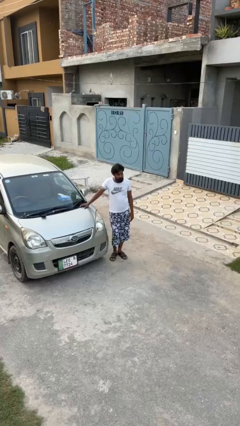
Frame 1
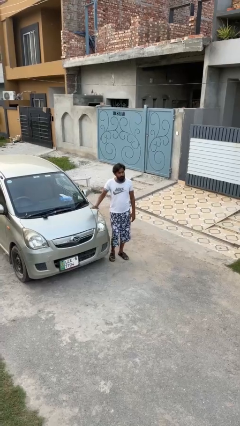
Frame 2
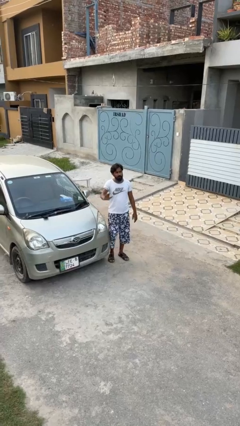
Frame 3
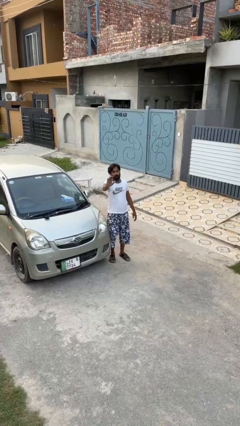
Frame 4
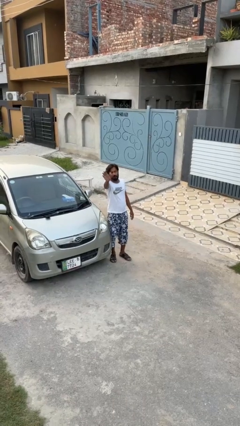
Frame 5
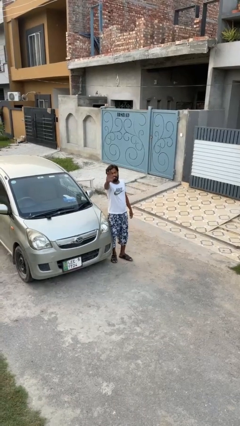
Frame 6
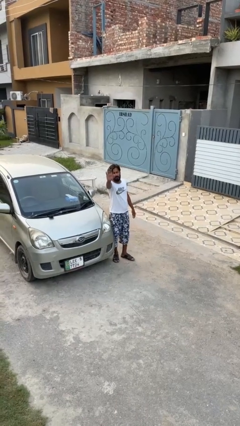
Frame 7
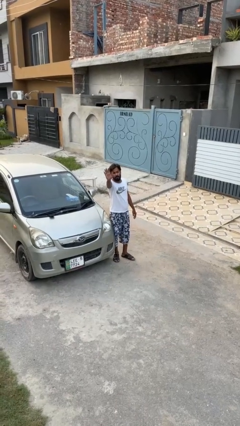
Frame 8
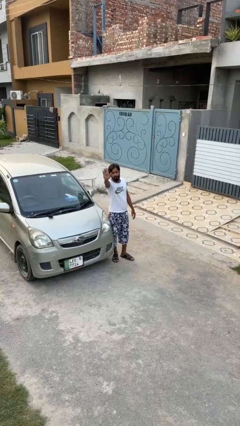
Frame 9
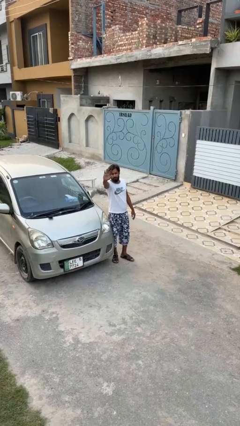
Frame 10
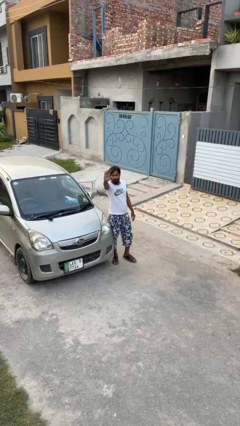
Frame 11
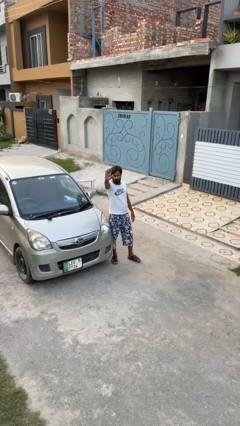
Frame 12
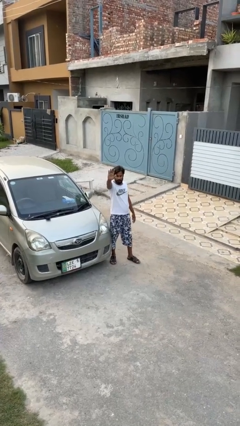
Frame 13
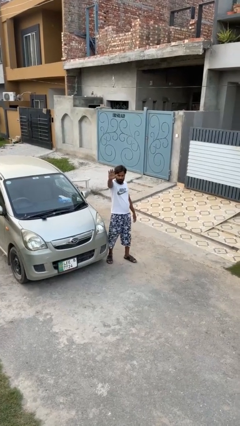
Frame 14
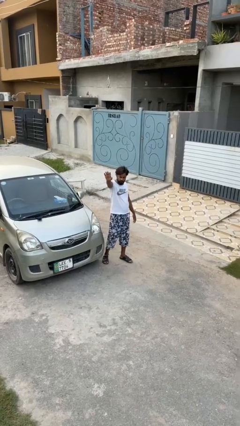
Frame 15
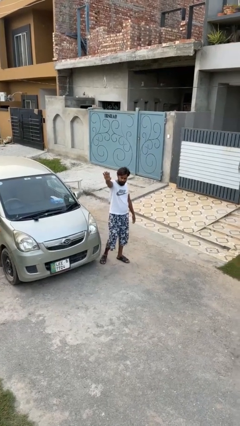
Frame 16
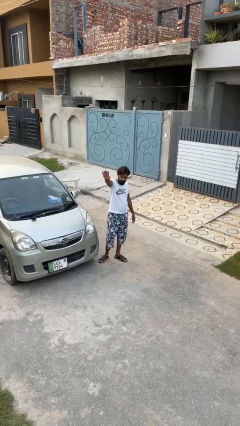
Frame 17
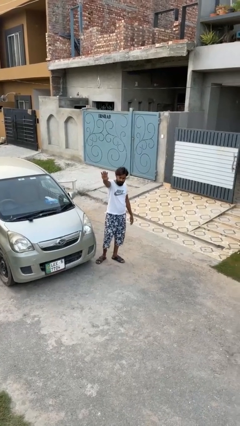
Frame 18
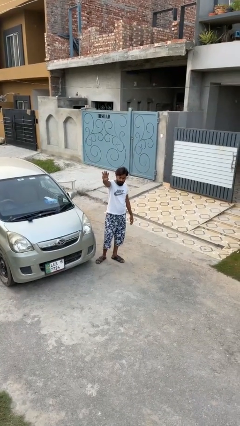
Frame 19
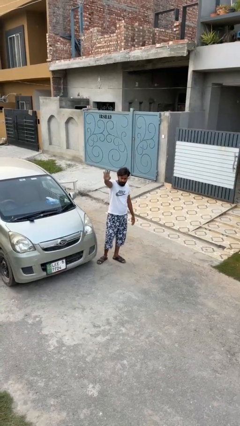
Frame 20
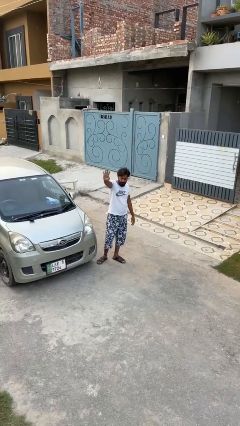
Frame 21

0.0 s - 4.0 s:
person waves at person

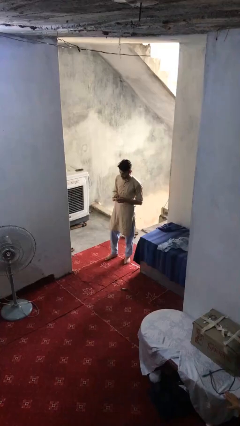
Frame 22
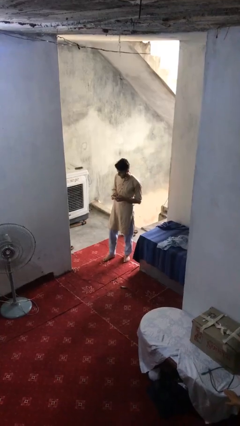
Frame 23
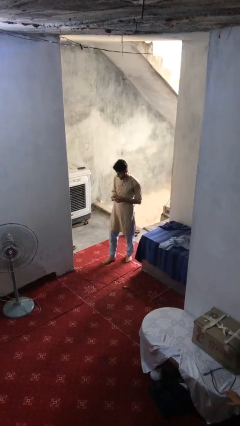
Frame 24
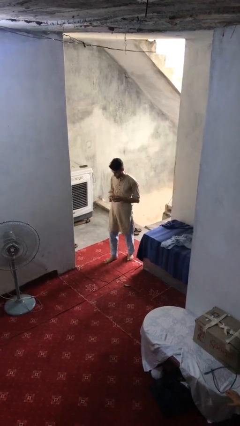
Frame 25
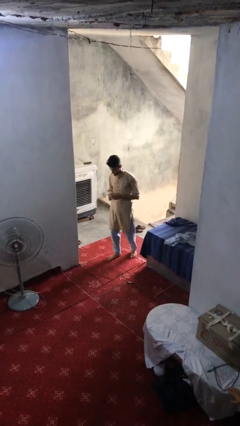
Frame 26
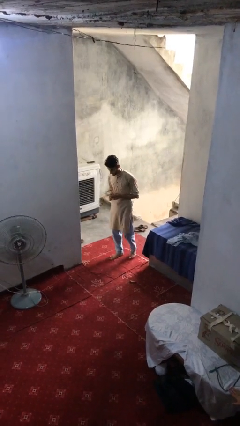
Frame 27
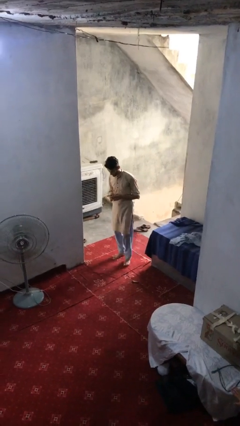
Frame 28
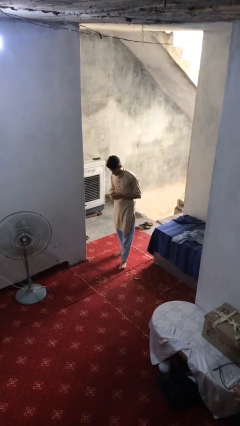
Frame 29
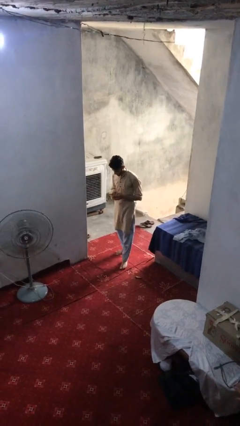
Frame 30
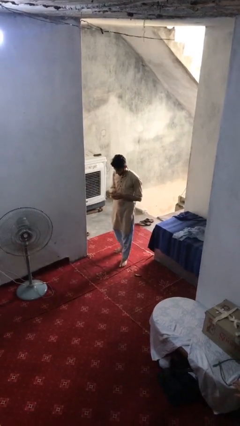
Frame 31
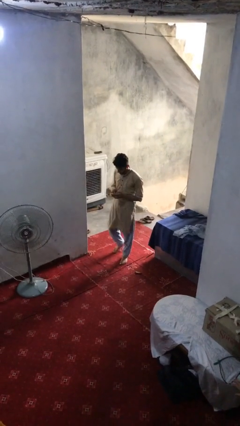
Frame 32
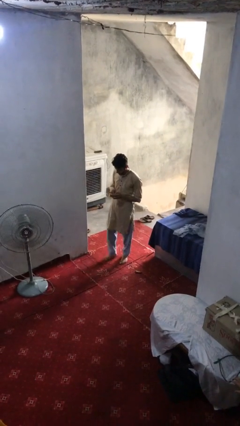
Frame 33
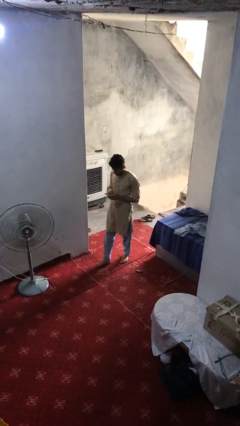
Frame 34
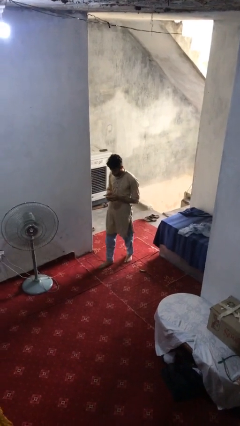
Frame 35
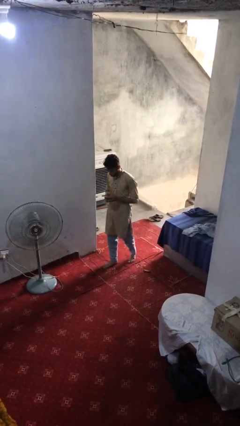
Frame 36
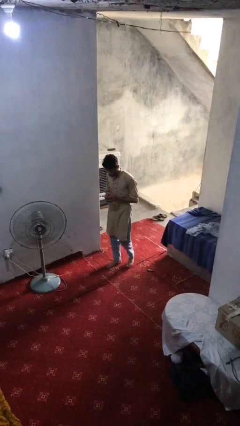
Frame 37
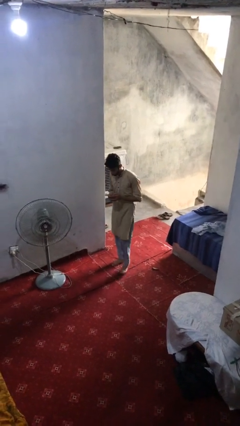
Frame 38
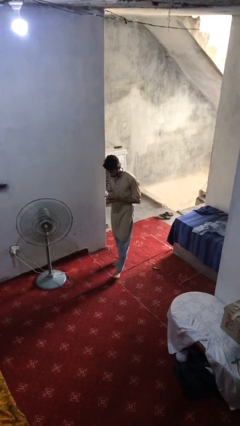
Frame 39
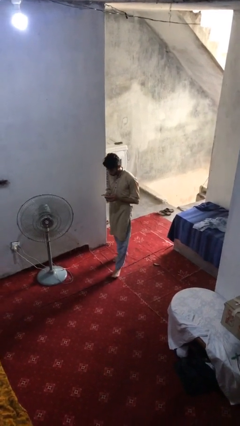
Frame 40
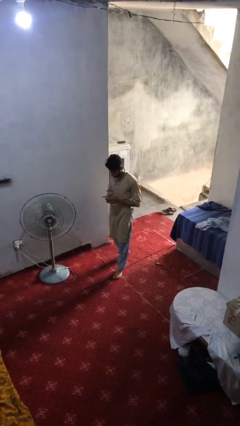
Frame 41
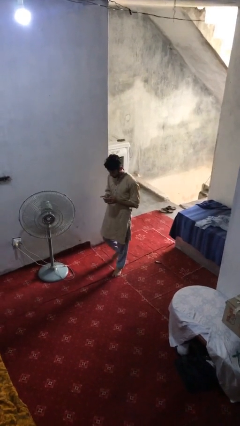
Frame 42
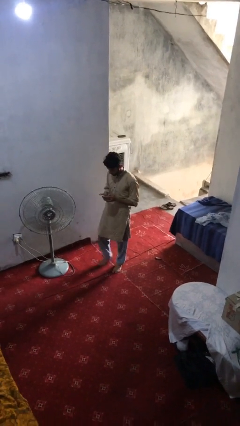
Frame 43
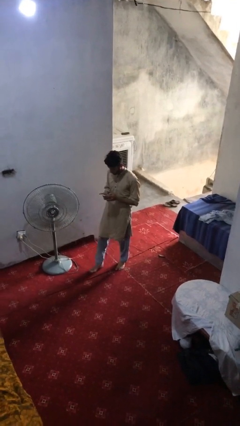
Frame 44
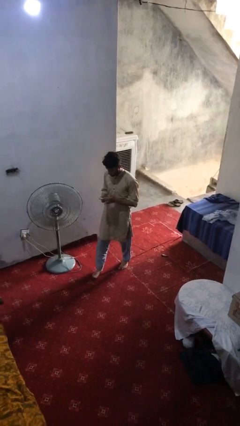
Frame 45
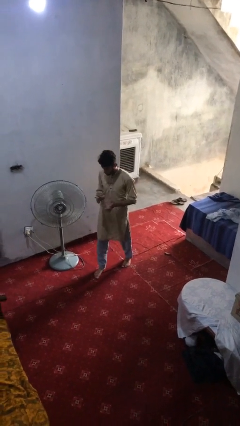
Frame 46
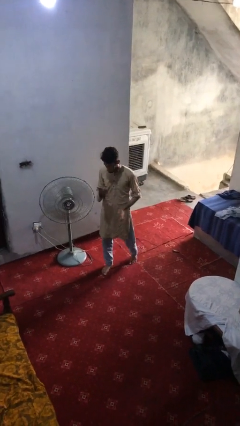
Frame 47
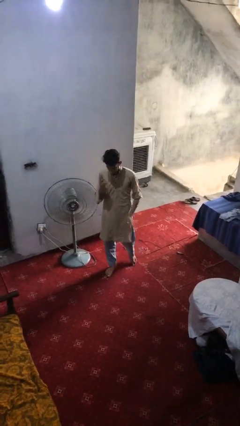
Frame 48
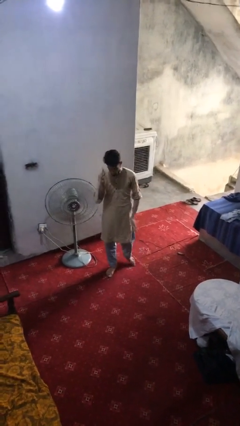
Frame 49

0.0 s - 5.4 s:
person texts on phone

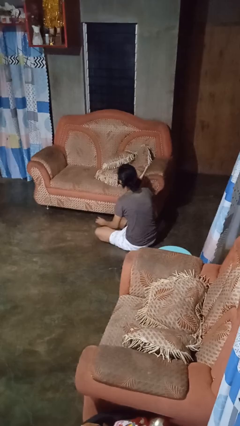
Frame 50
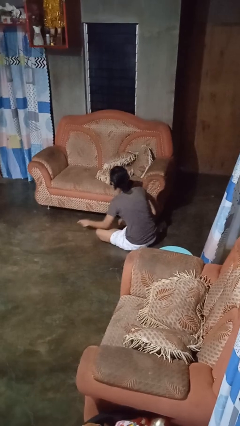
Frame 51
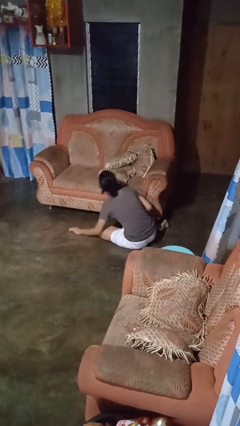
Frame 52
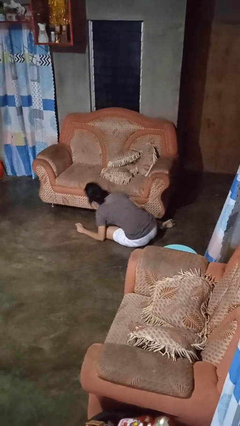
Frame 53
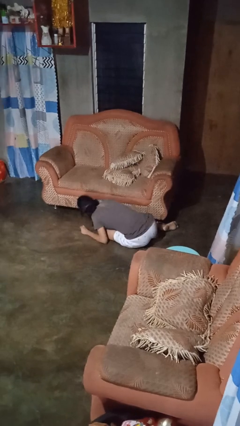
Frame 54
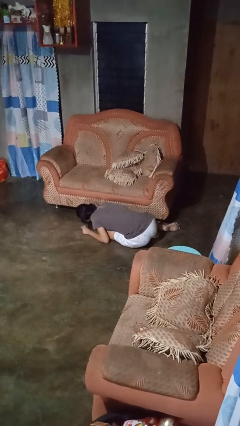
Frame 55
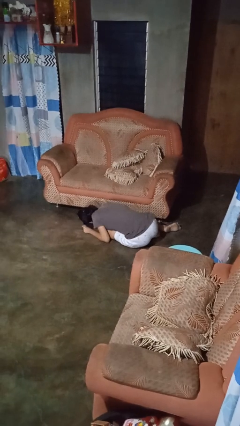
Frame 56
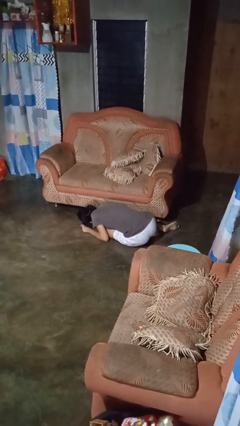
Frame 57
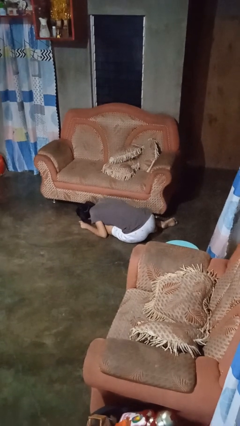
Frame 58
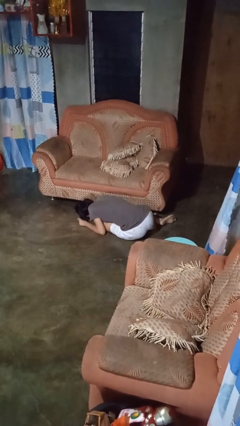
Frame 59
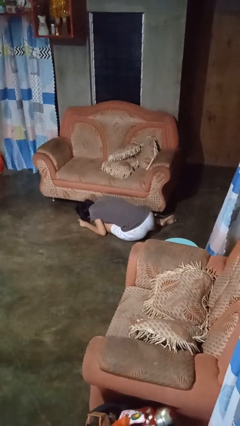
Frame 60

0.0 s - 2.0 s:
person searches under couch

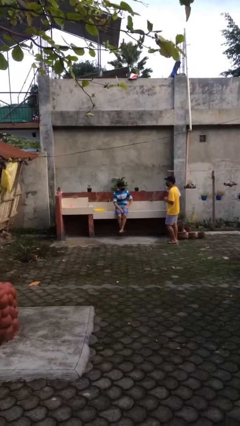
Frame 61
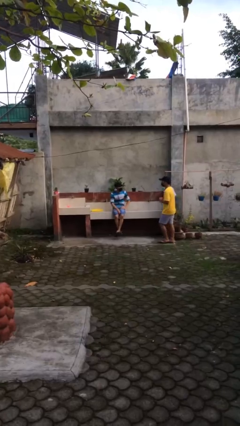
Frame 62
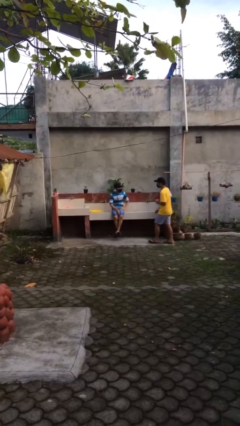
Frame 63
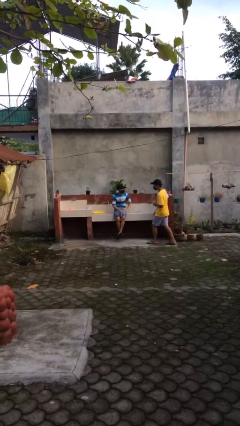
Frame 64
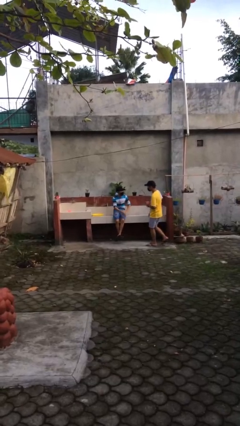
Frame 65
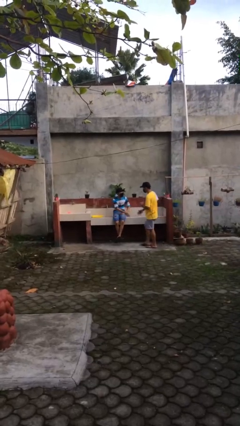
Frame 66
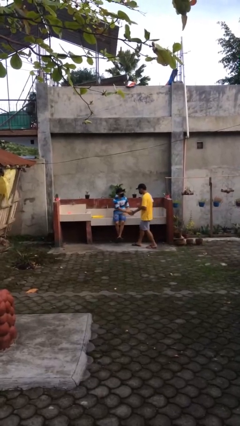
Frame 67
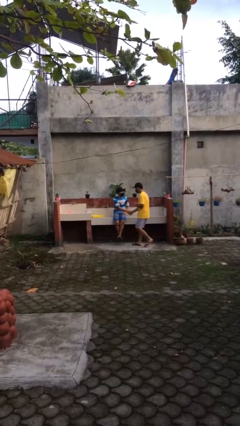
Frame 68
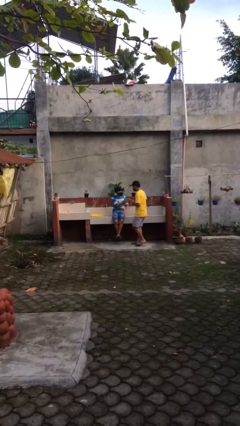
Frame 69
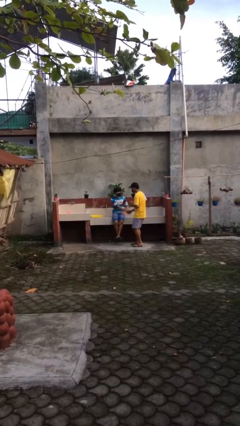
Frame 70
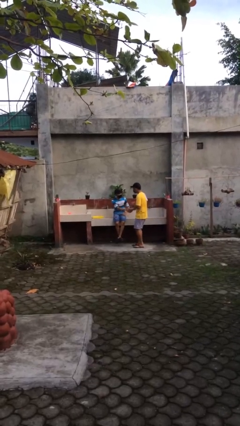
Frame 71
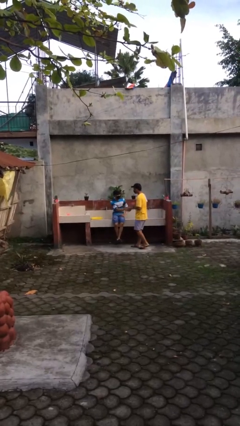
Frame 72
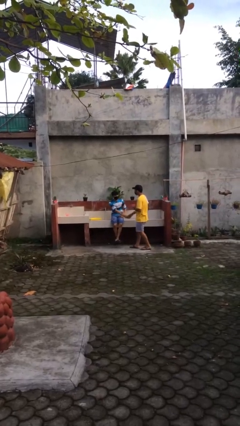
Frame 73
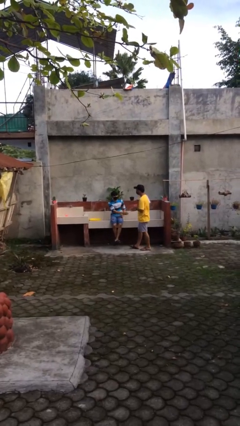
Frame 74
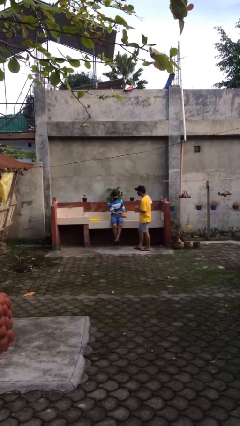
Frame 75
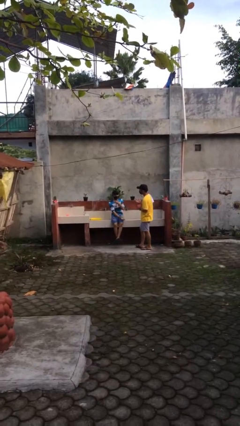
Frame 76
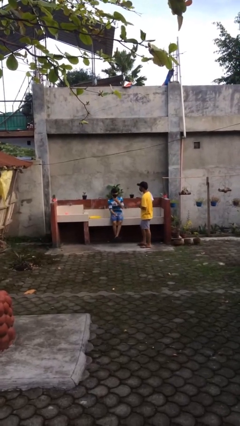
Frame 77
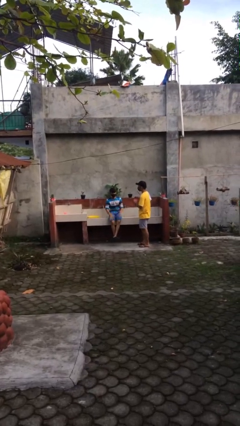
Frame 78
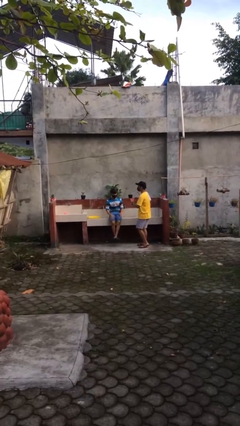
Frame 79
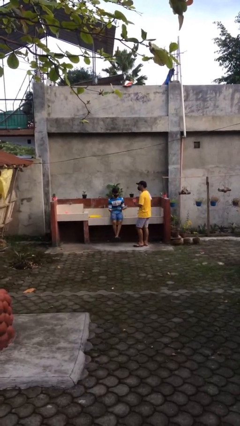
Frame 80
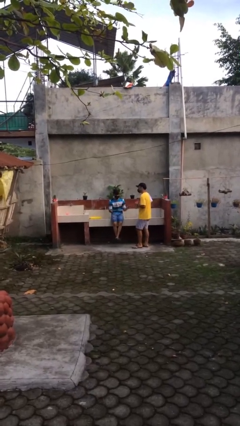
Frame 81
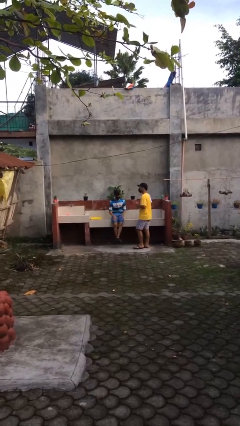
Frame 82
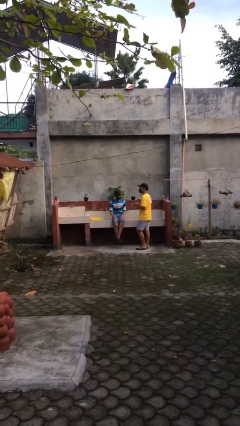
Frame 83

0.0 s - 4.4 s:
person shakes hand

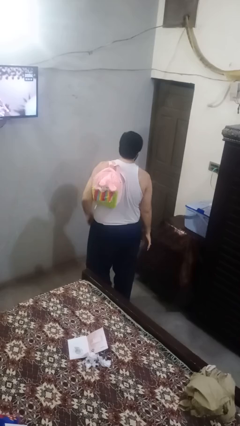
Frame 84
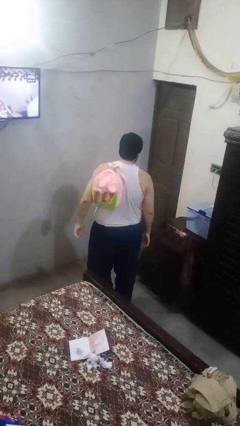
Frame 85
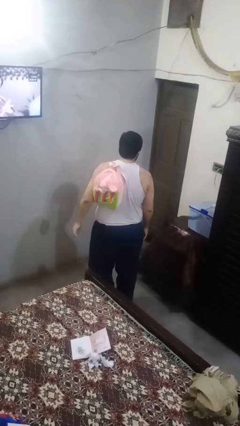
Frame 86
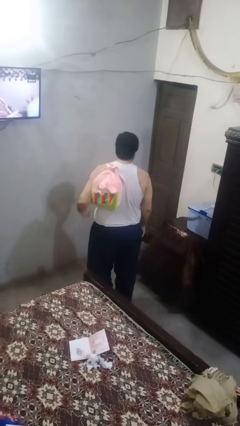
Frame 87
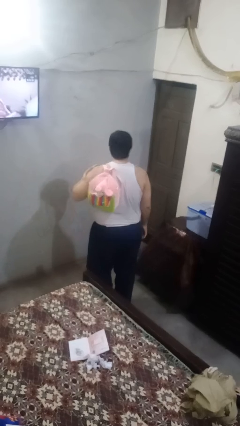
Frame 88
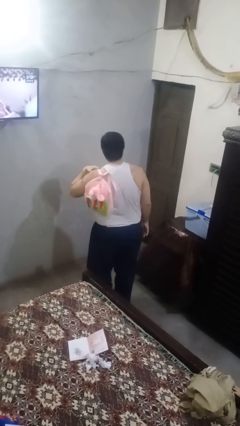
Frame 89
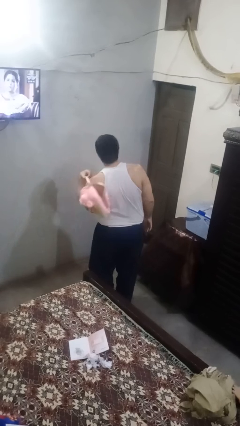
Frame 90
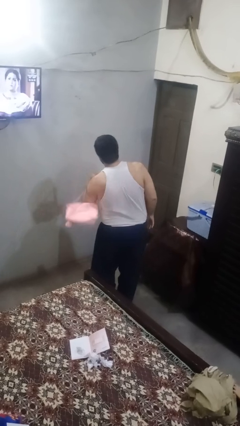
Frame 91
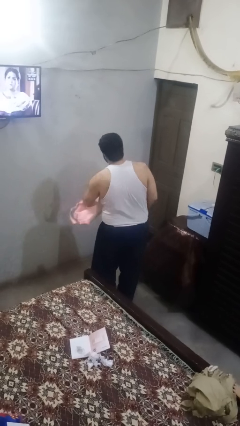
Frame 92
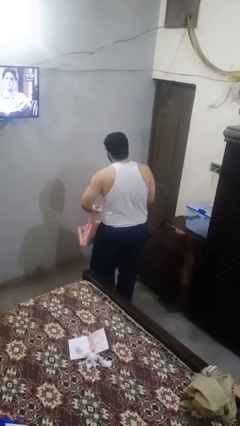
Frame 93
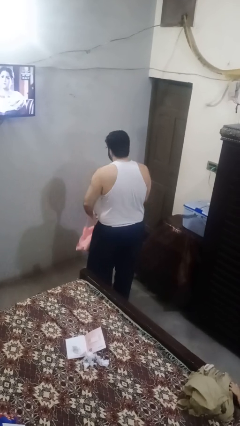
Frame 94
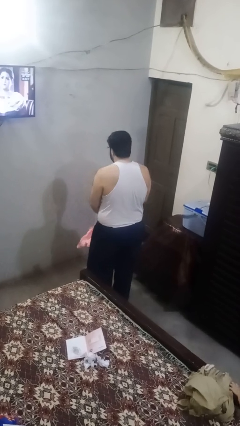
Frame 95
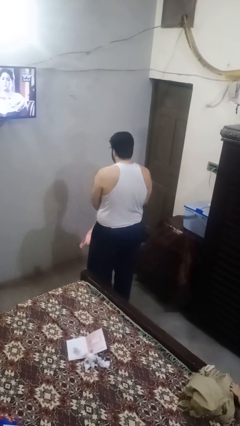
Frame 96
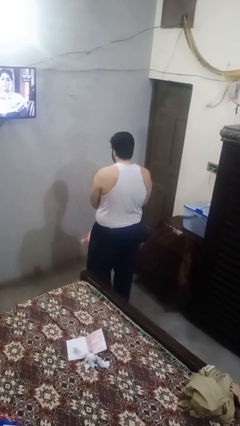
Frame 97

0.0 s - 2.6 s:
person takes off backpack
